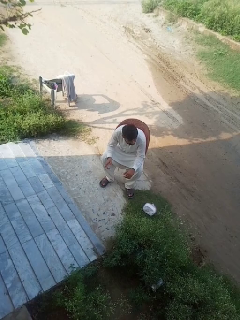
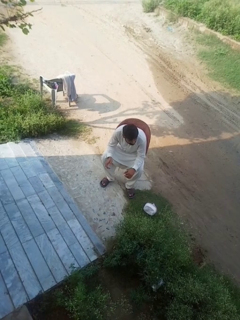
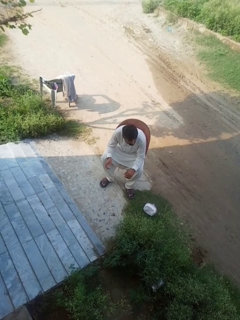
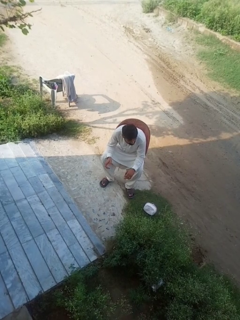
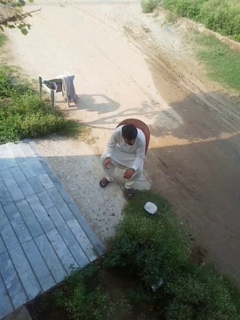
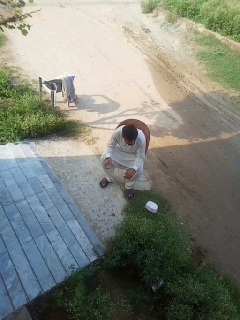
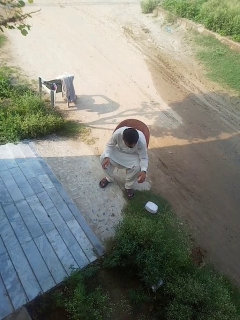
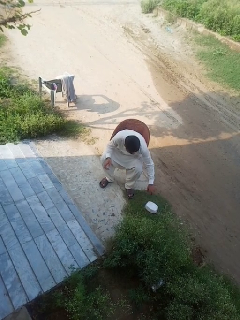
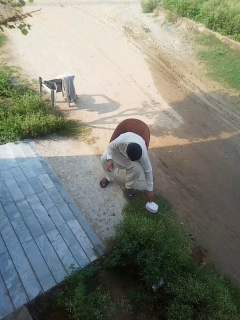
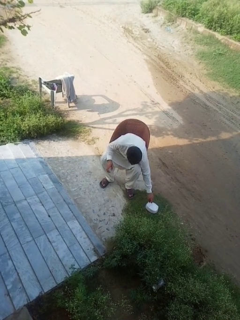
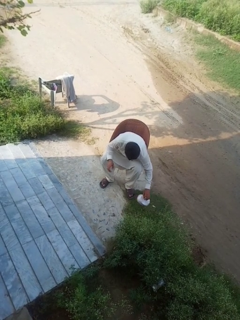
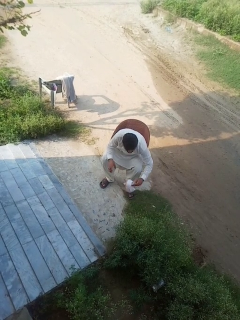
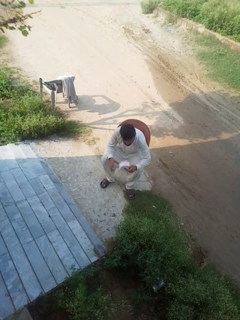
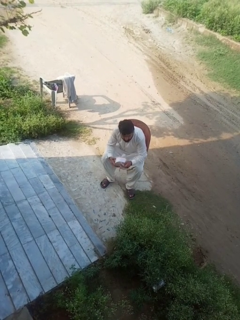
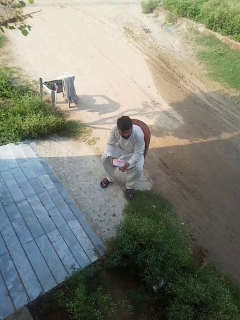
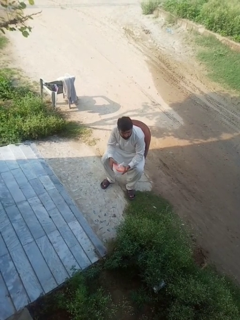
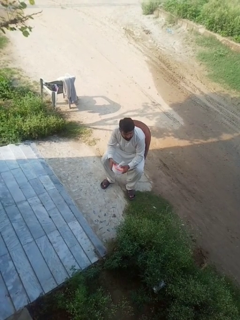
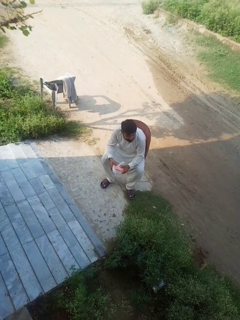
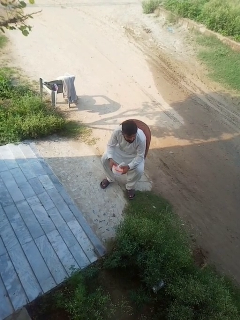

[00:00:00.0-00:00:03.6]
person picks up object from floor

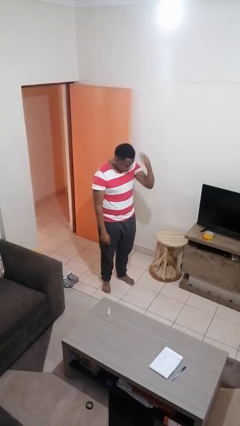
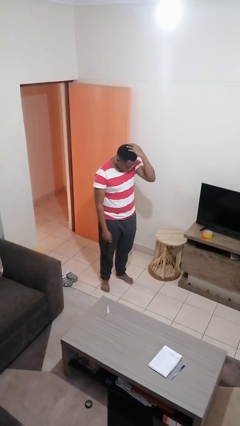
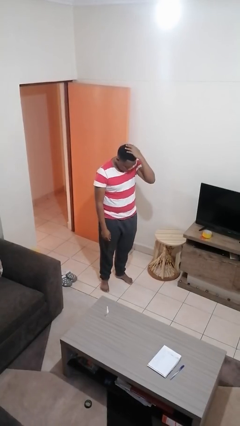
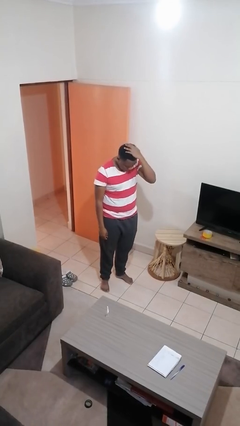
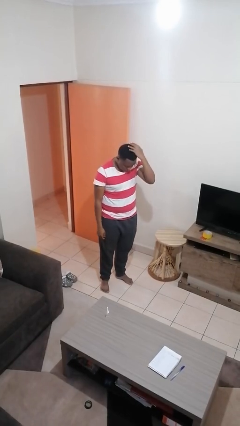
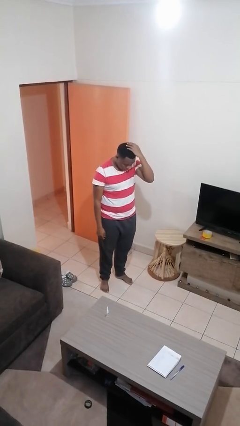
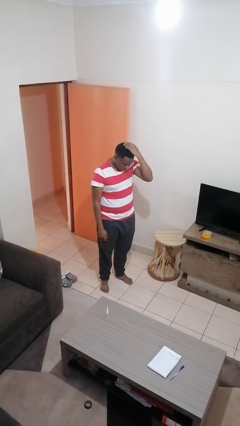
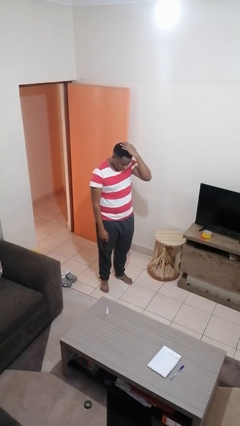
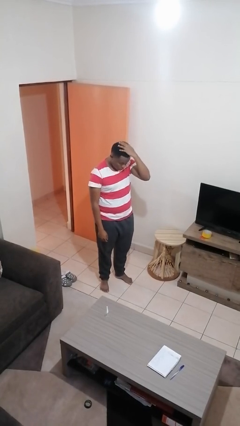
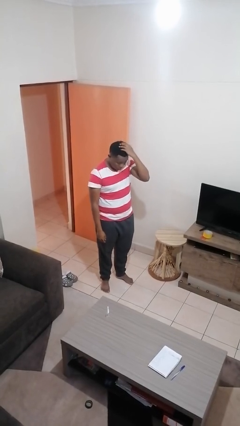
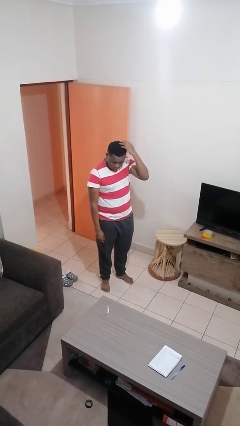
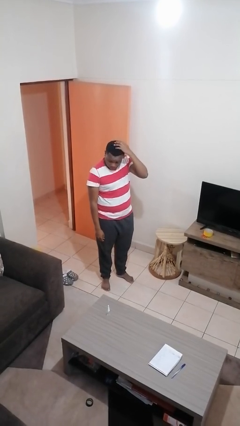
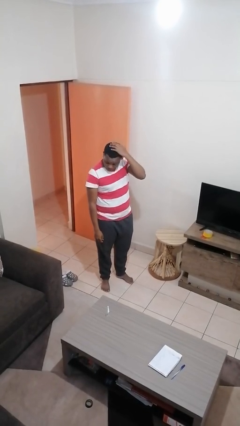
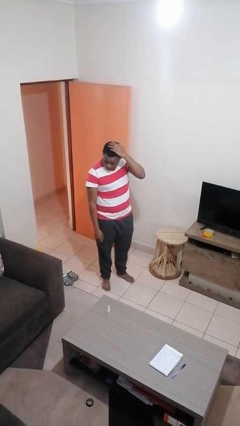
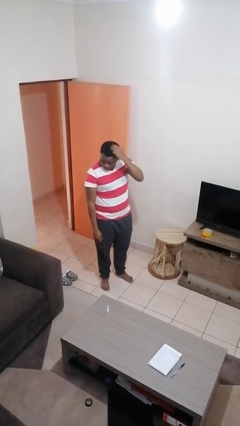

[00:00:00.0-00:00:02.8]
person pats head

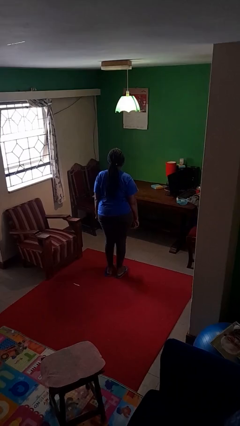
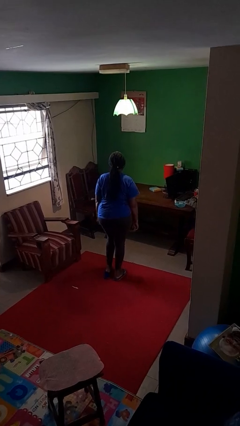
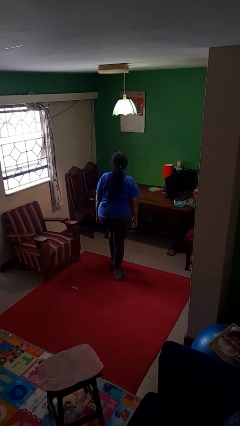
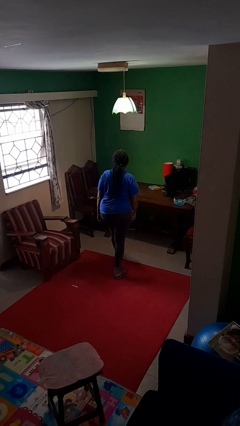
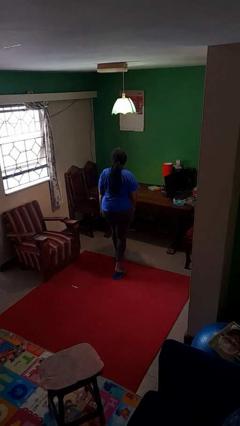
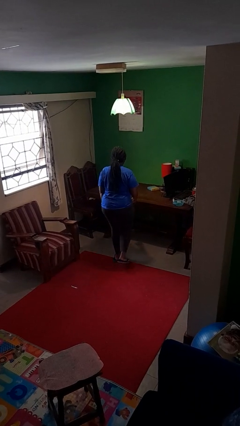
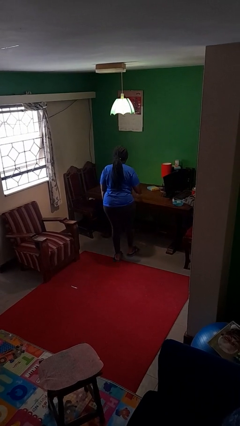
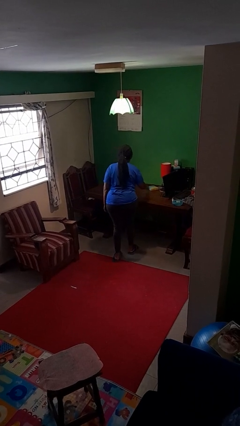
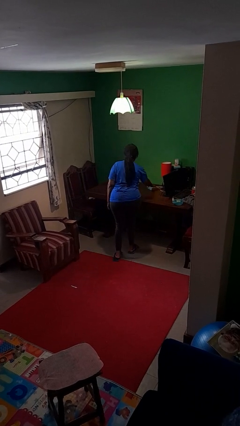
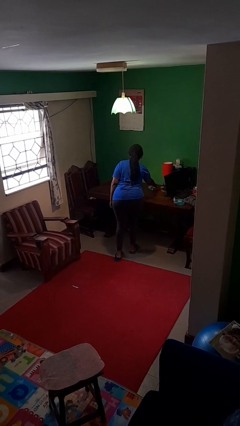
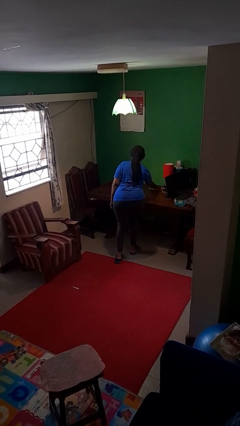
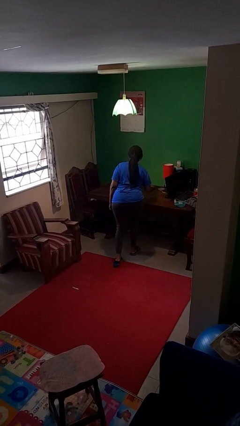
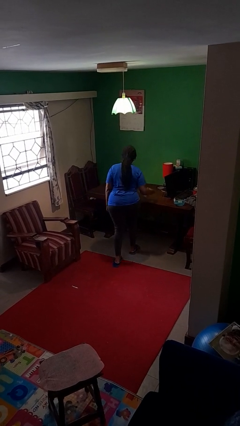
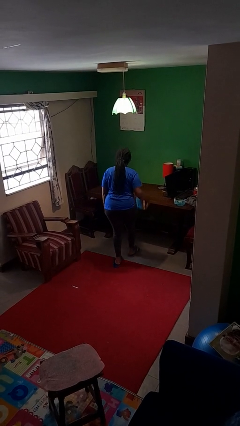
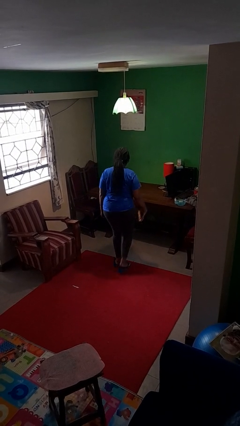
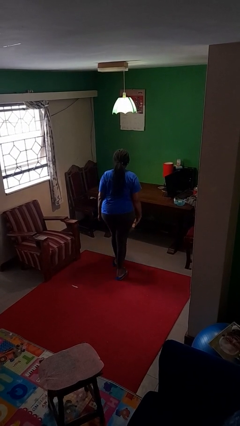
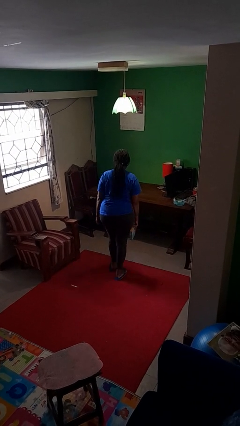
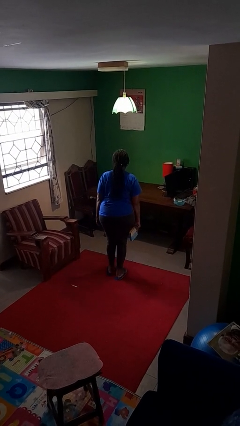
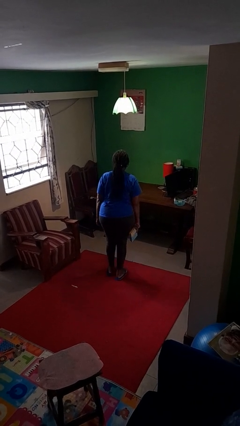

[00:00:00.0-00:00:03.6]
person picks up object from table

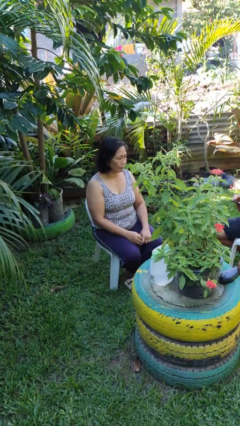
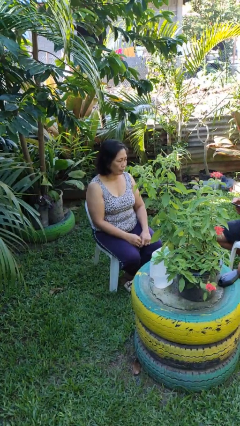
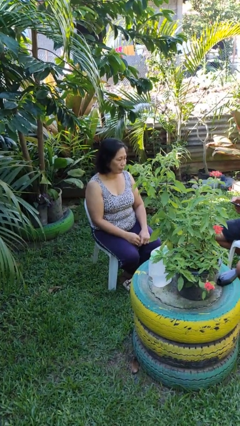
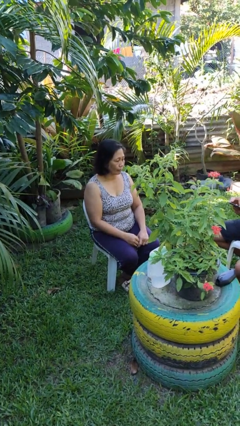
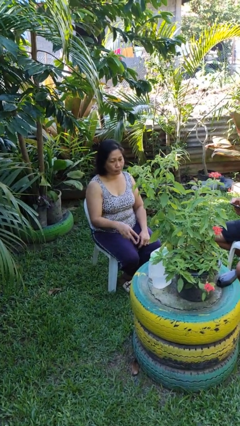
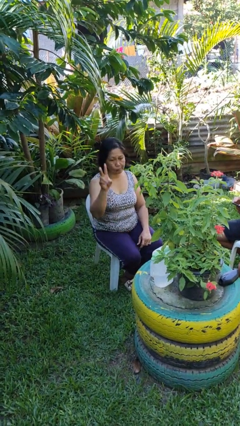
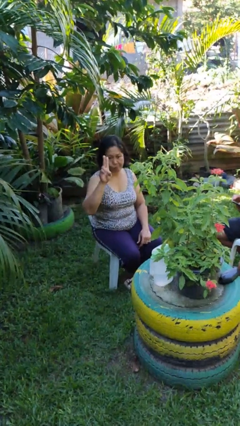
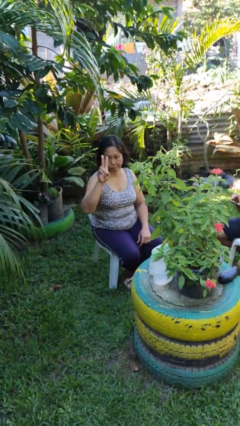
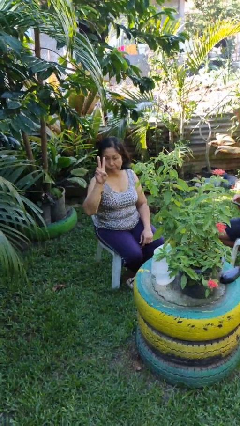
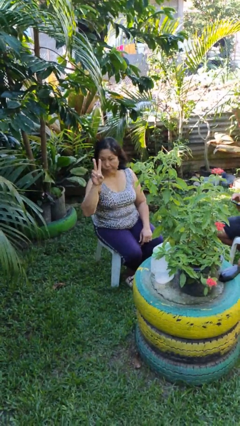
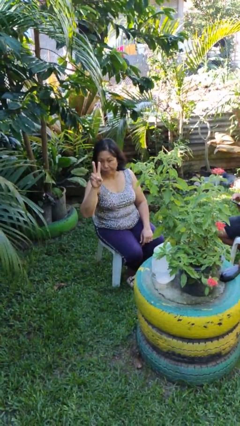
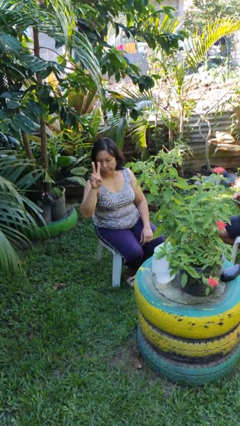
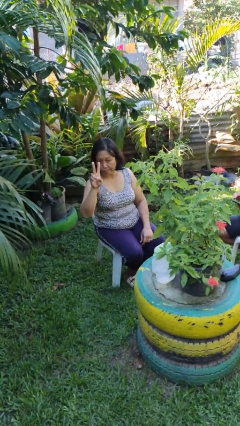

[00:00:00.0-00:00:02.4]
person gestures peace

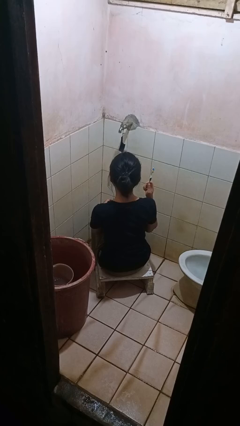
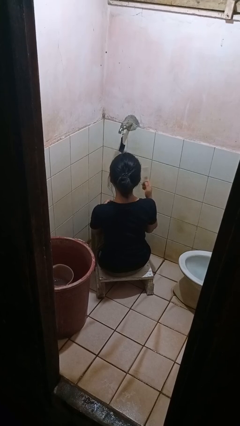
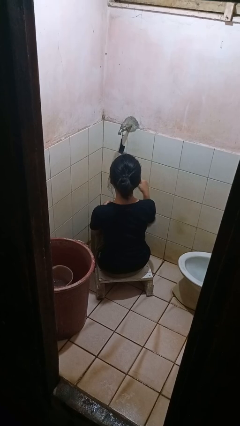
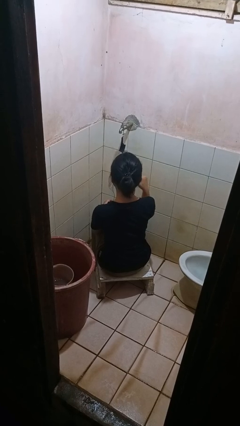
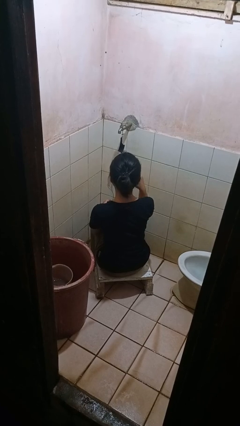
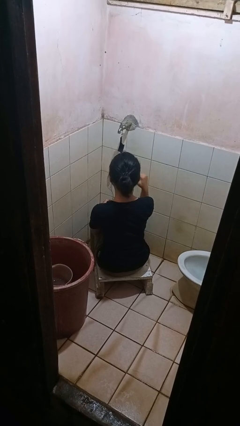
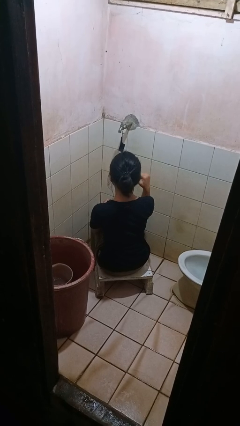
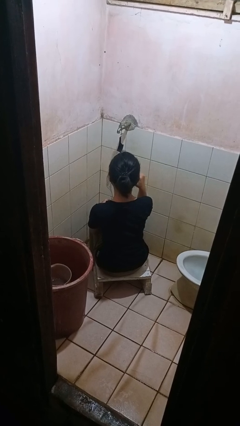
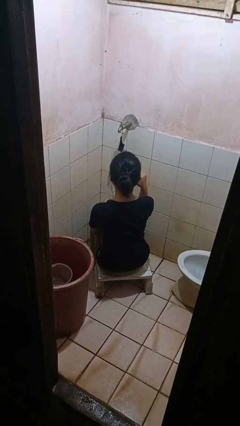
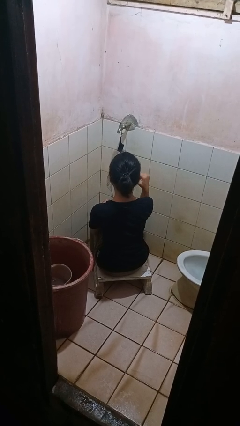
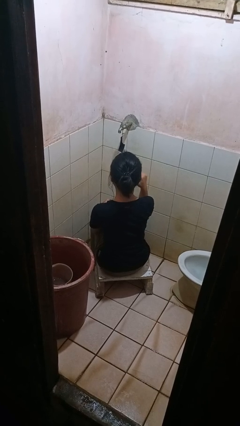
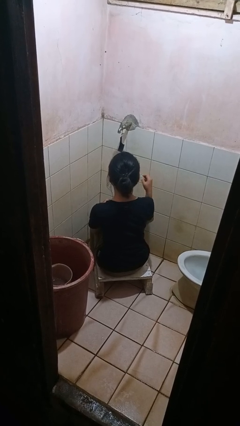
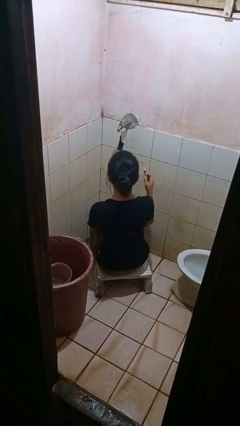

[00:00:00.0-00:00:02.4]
person brushes teeth

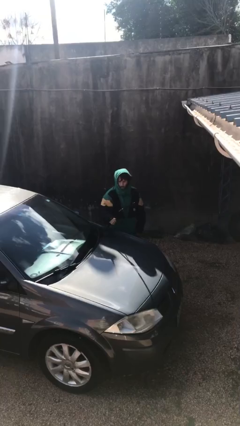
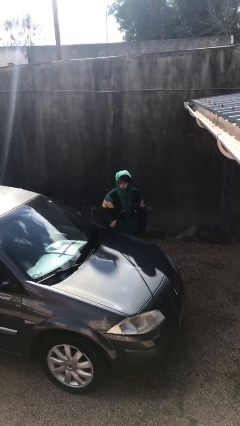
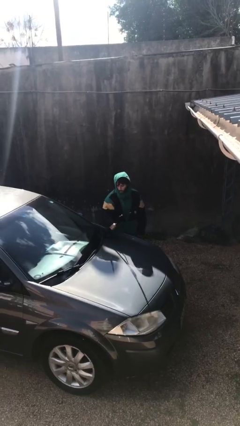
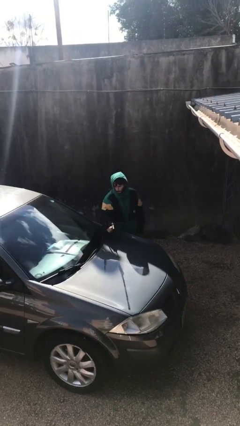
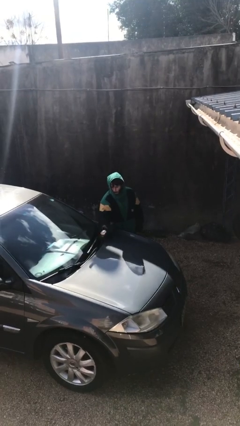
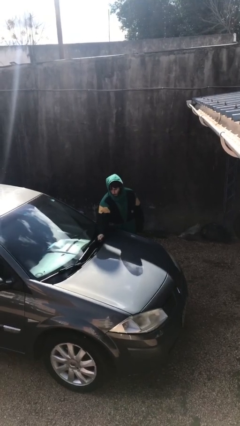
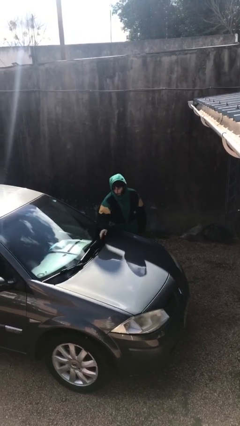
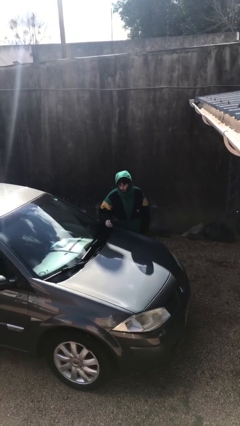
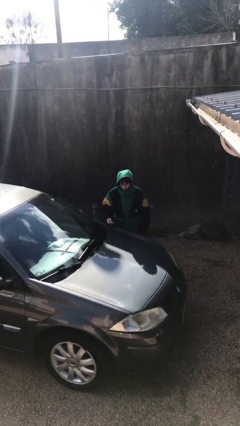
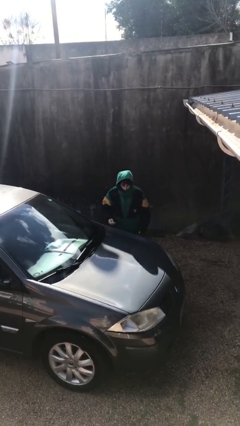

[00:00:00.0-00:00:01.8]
person flips down car wipers

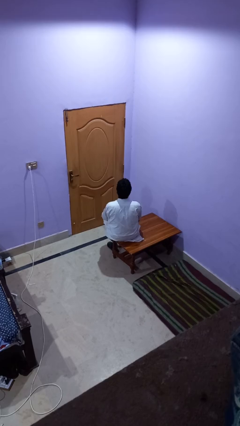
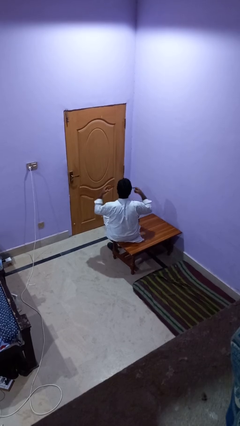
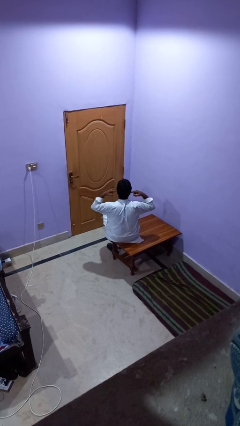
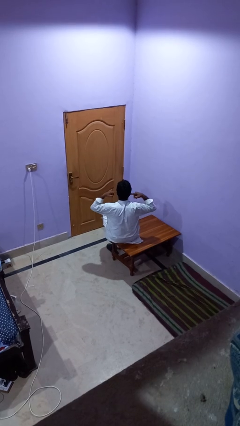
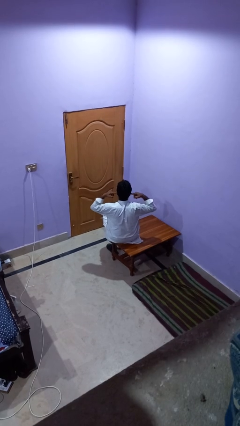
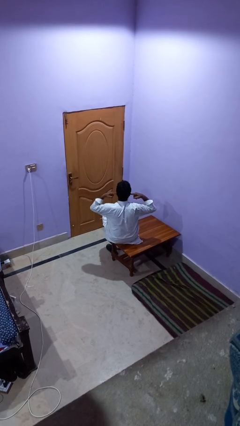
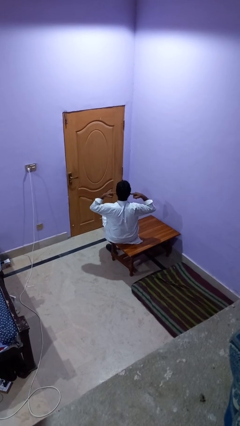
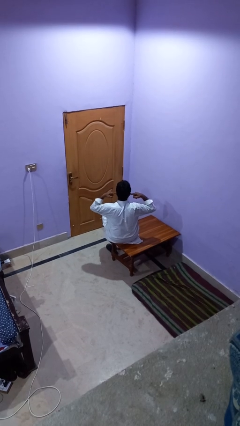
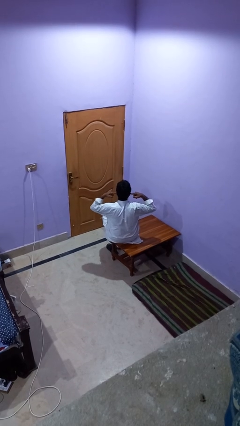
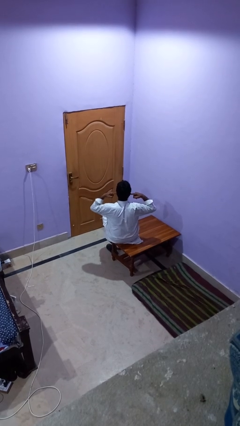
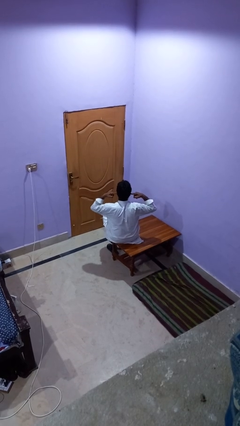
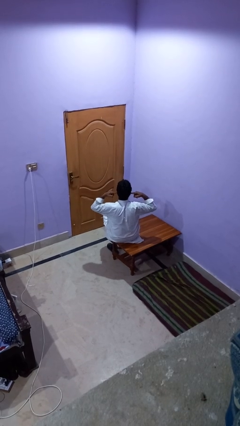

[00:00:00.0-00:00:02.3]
person puts fingers in ear
